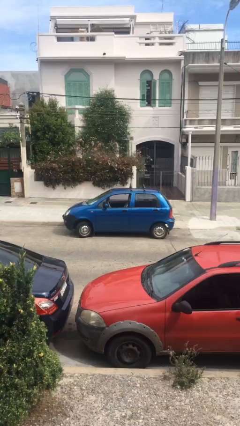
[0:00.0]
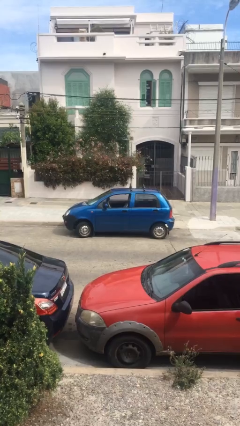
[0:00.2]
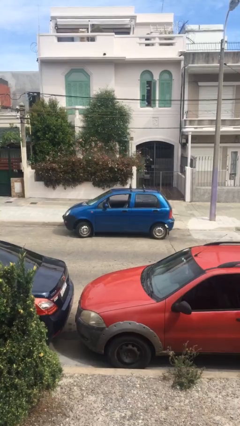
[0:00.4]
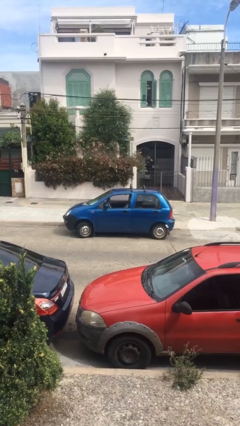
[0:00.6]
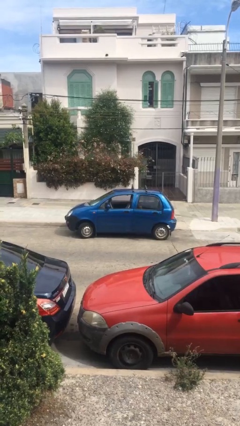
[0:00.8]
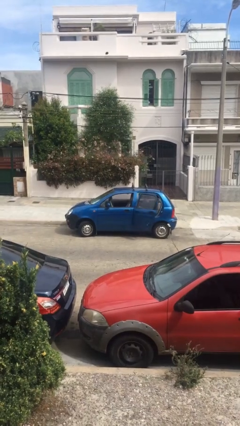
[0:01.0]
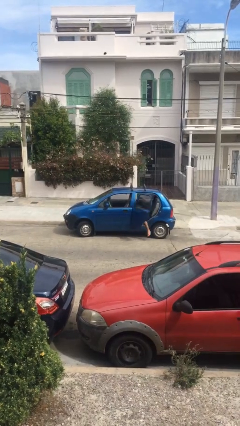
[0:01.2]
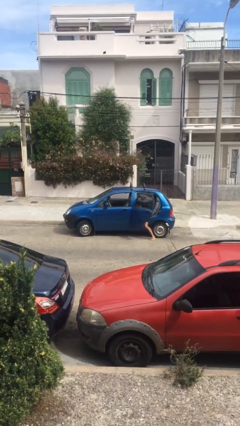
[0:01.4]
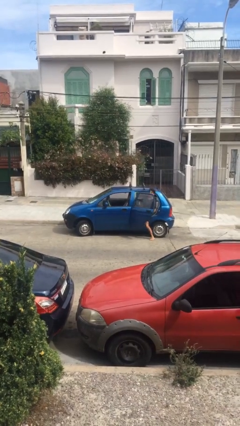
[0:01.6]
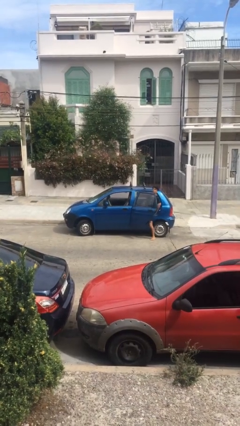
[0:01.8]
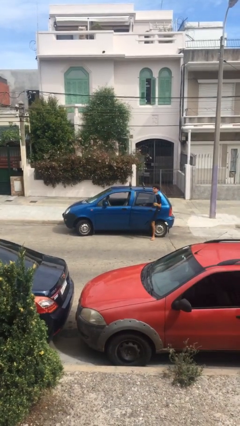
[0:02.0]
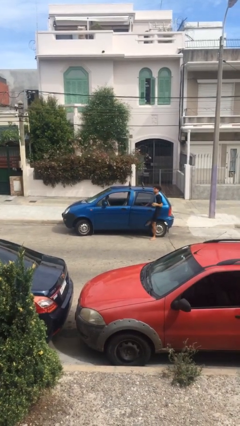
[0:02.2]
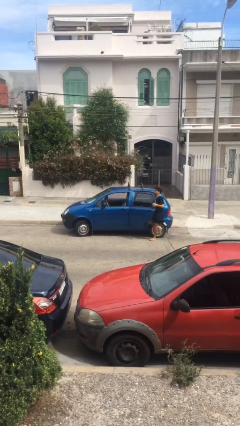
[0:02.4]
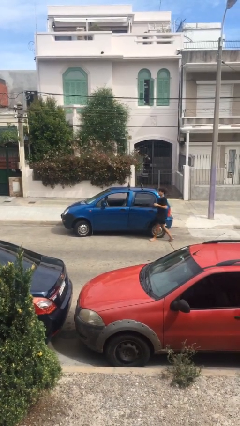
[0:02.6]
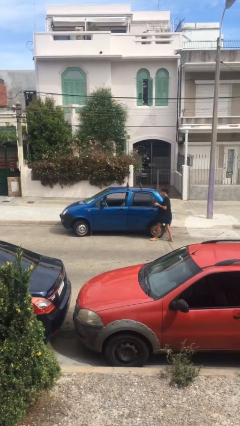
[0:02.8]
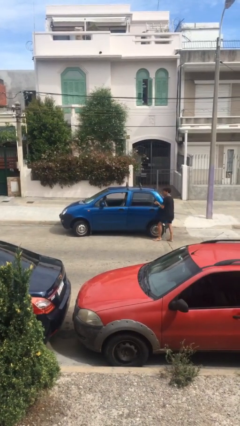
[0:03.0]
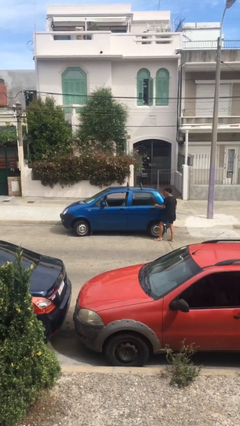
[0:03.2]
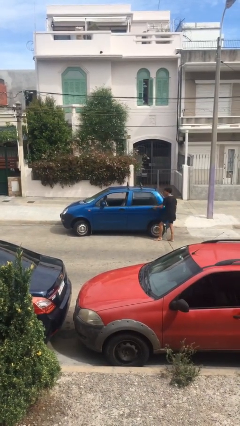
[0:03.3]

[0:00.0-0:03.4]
car drops off person

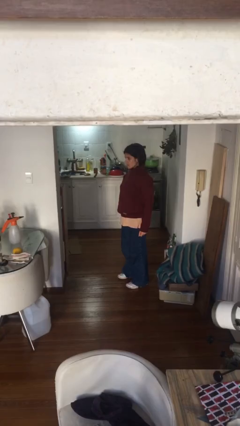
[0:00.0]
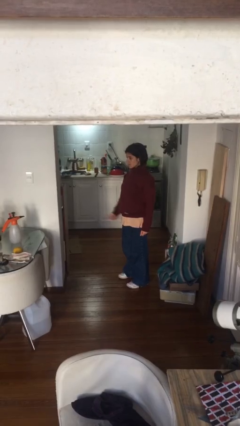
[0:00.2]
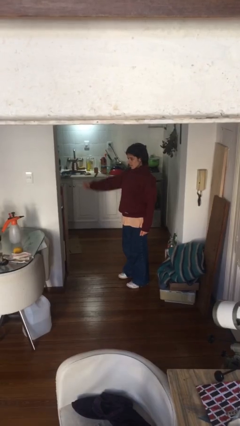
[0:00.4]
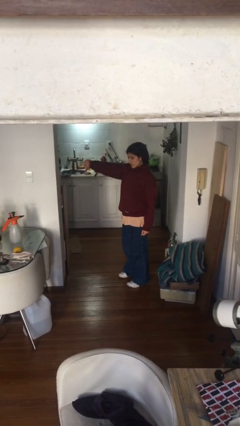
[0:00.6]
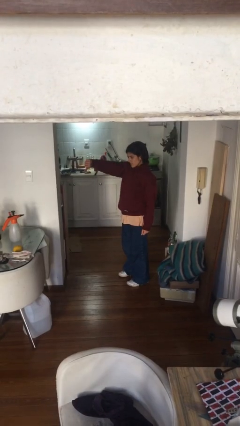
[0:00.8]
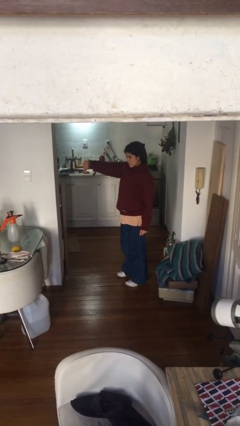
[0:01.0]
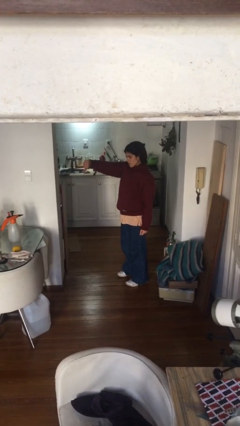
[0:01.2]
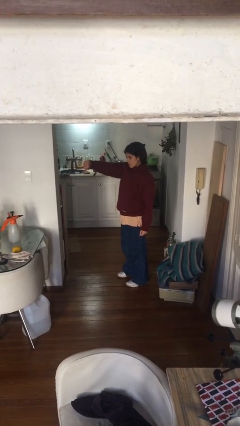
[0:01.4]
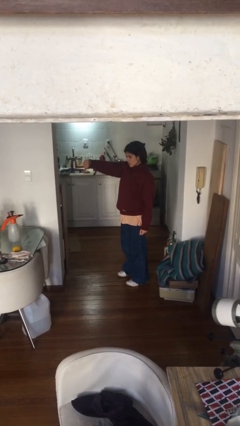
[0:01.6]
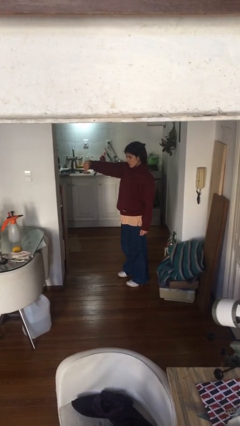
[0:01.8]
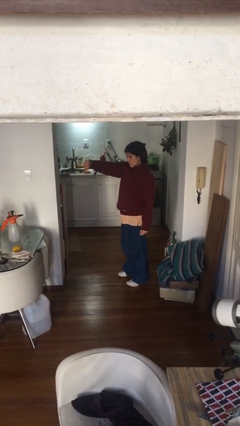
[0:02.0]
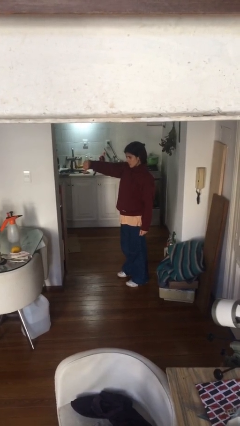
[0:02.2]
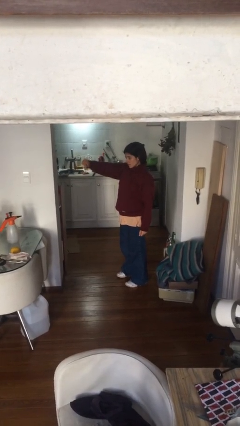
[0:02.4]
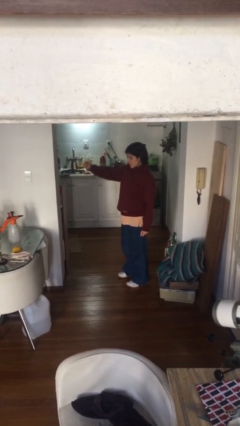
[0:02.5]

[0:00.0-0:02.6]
person gestures thumbs down

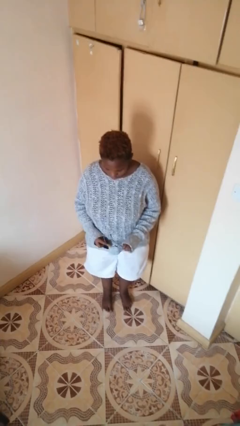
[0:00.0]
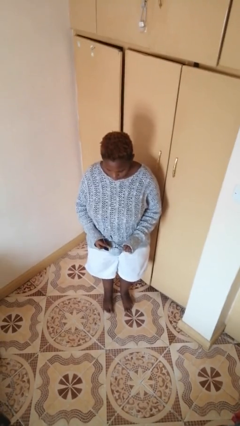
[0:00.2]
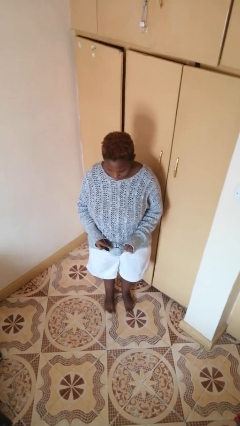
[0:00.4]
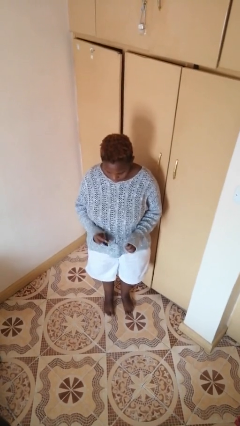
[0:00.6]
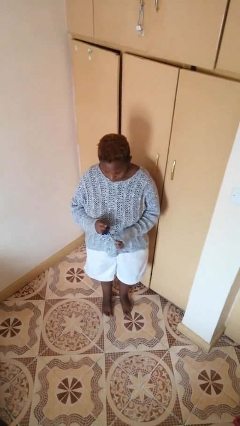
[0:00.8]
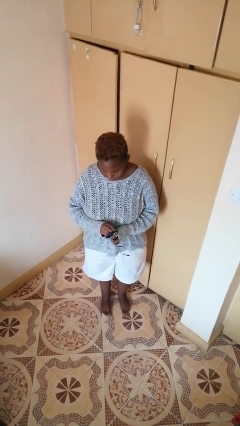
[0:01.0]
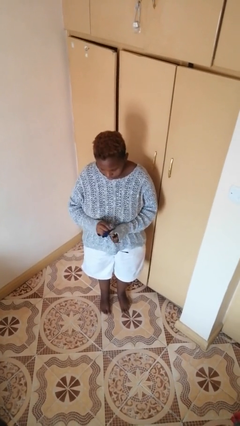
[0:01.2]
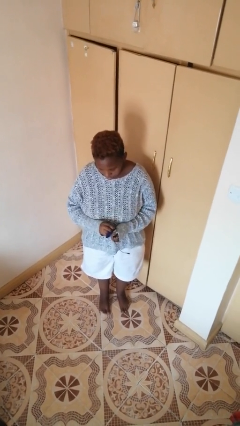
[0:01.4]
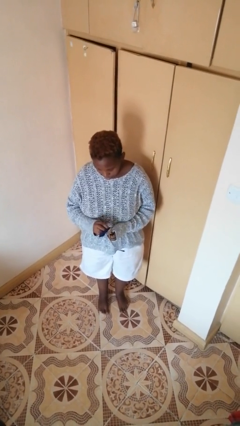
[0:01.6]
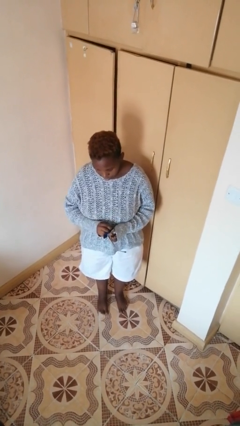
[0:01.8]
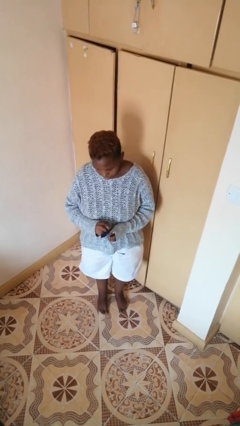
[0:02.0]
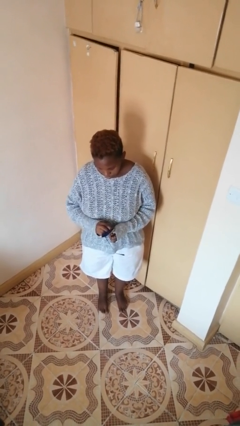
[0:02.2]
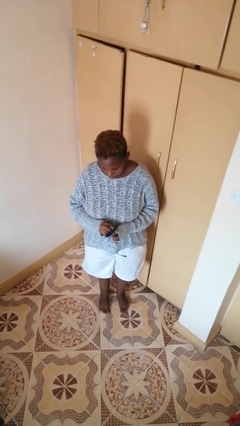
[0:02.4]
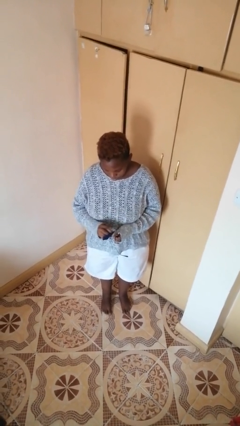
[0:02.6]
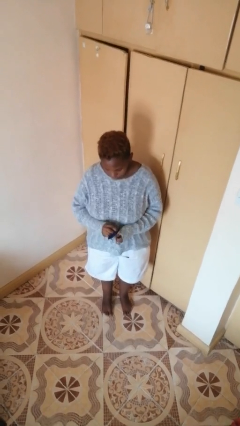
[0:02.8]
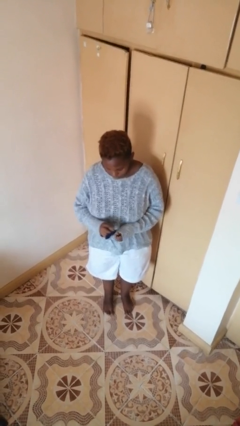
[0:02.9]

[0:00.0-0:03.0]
person cleans eyeglasses

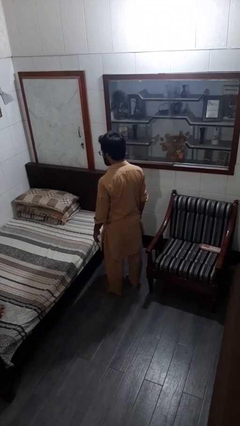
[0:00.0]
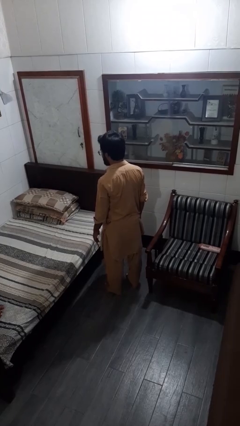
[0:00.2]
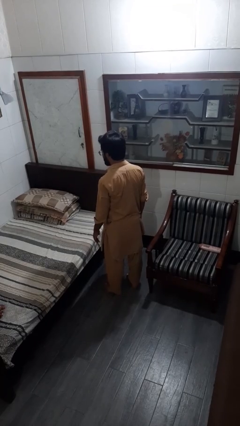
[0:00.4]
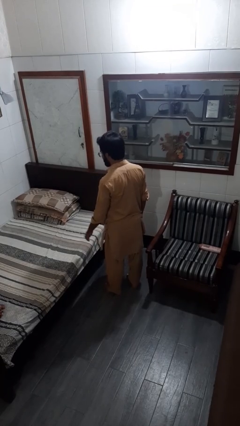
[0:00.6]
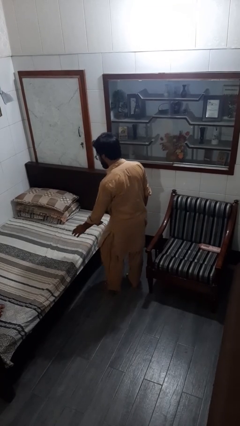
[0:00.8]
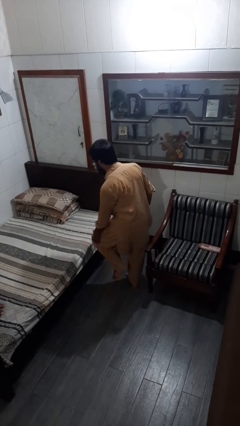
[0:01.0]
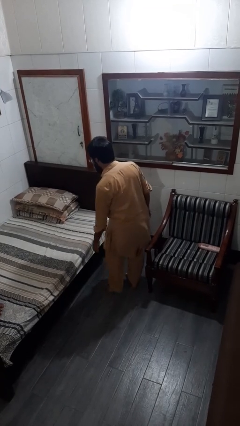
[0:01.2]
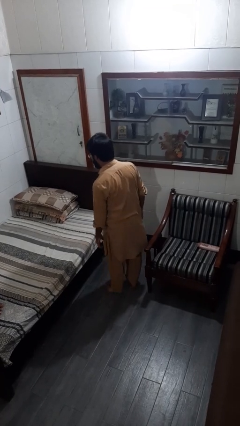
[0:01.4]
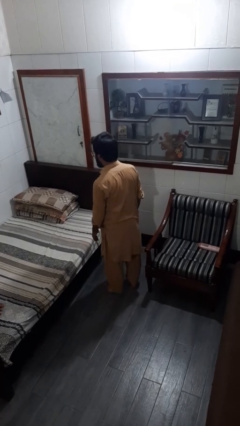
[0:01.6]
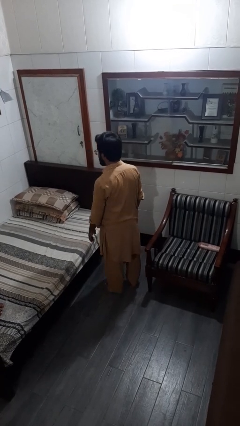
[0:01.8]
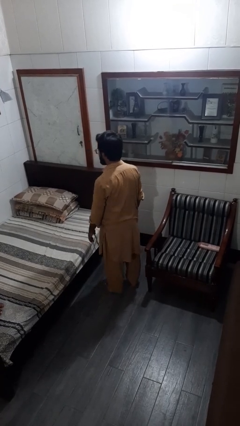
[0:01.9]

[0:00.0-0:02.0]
person swats bug

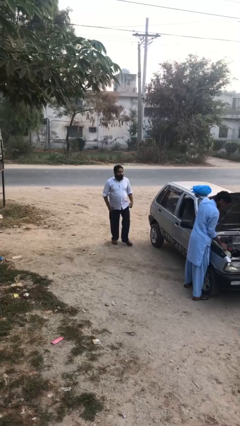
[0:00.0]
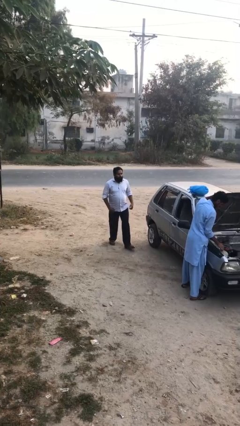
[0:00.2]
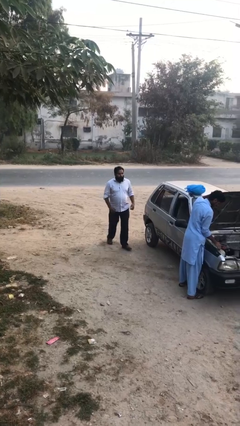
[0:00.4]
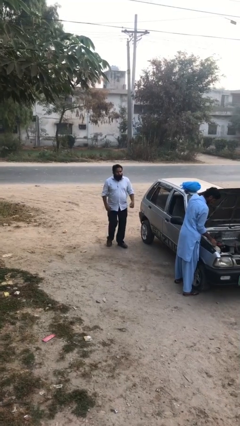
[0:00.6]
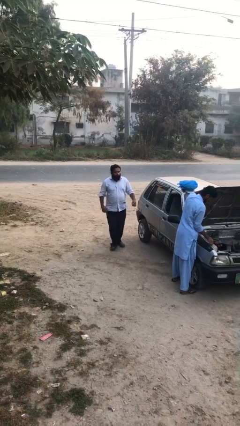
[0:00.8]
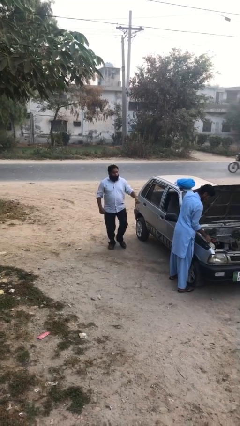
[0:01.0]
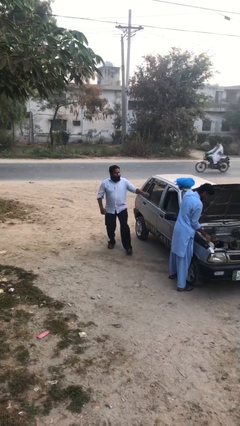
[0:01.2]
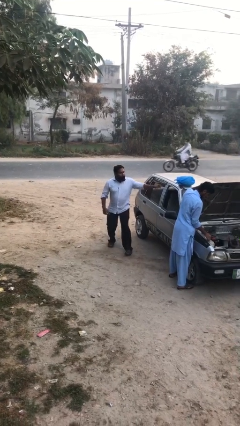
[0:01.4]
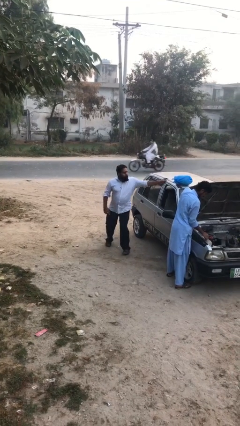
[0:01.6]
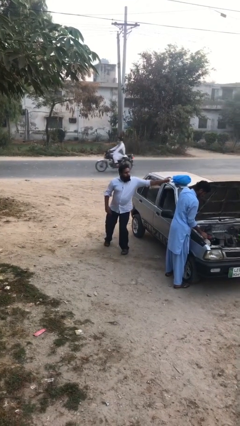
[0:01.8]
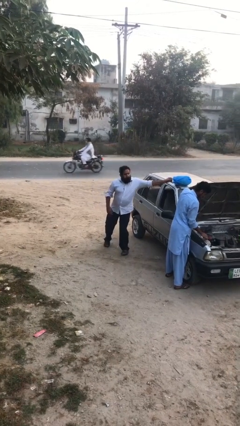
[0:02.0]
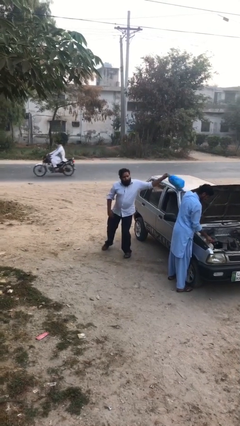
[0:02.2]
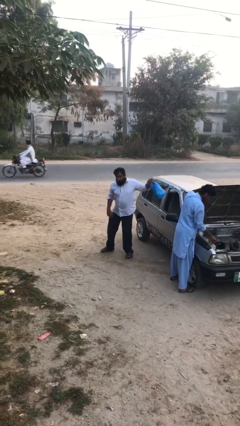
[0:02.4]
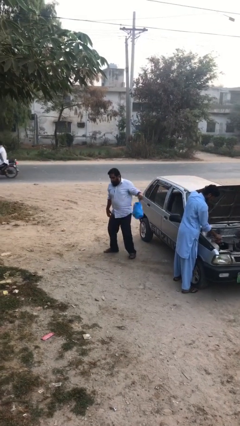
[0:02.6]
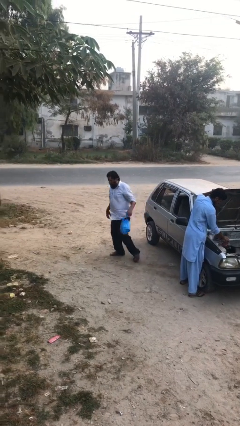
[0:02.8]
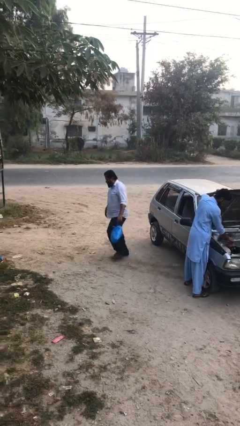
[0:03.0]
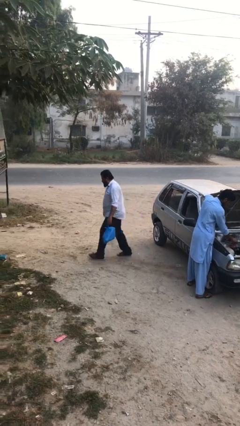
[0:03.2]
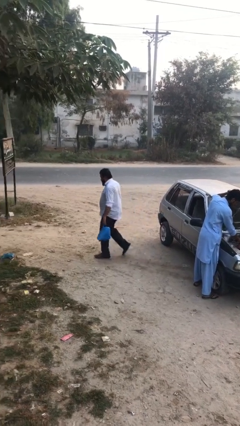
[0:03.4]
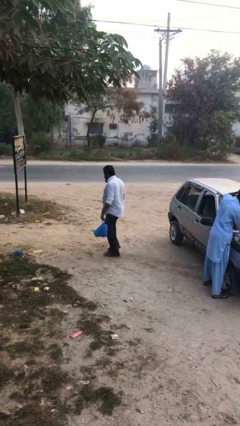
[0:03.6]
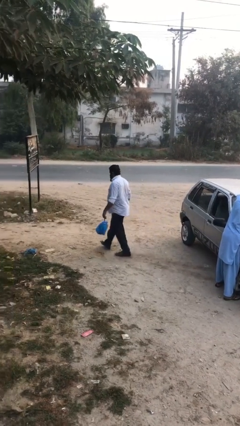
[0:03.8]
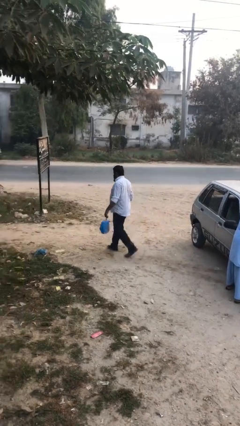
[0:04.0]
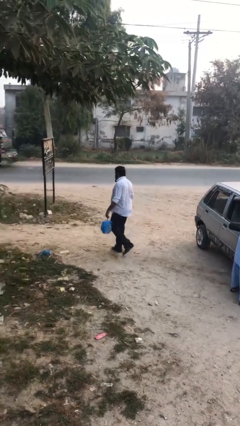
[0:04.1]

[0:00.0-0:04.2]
person steals object from person

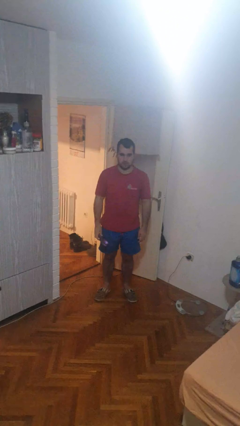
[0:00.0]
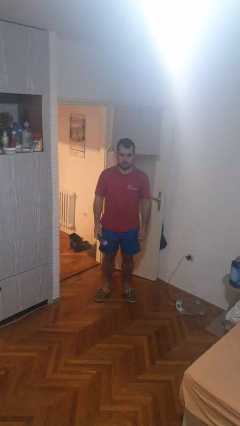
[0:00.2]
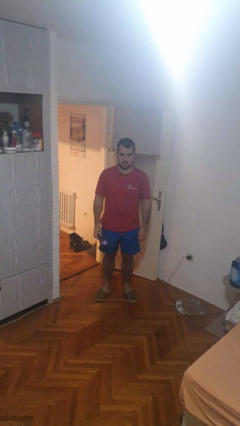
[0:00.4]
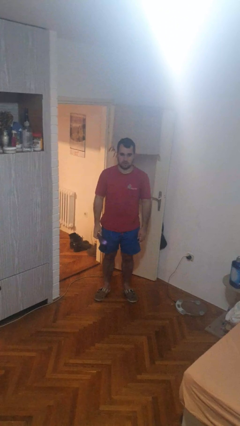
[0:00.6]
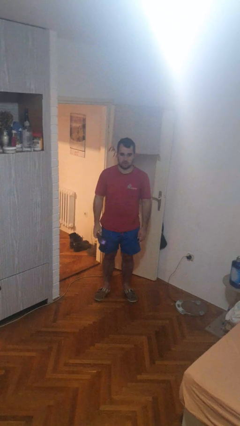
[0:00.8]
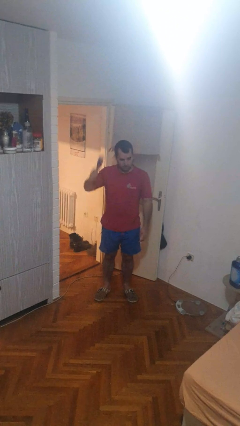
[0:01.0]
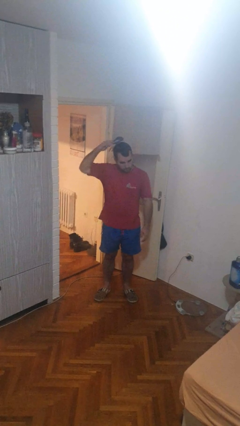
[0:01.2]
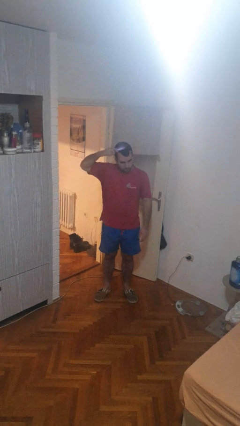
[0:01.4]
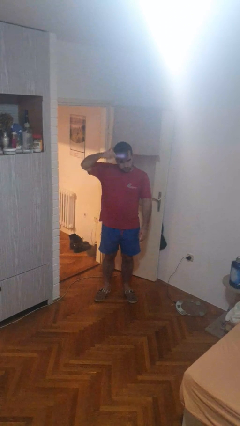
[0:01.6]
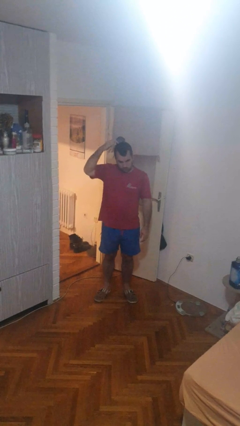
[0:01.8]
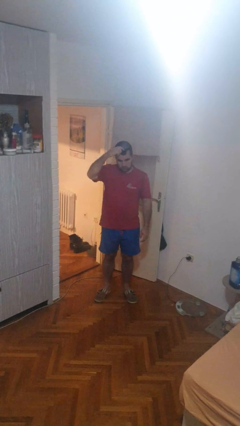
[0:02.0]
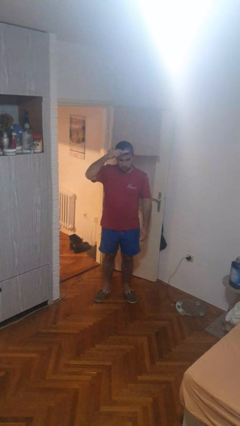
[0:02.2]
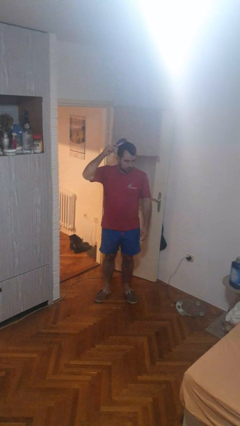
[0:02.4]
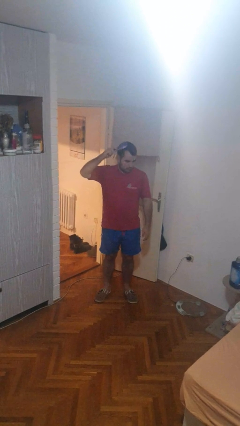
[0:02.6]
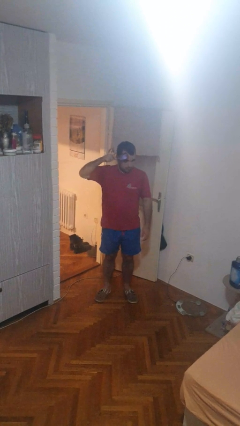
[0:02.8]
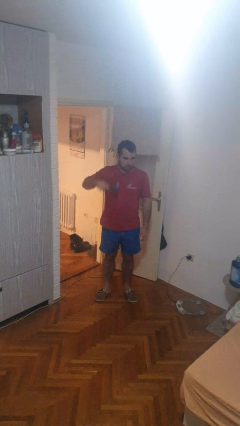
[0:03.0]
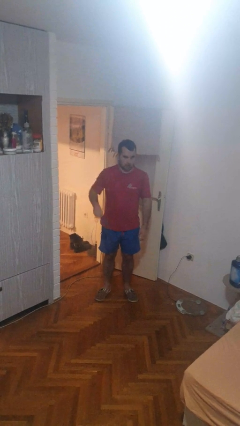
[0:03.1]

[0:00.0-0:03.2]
person brushes hair
